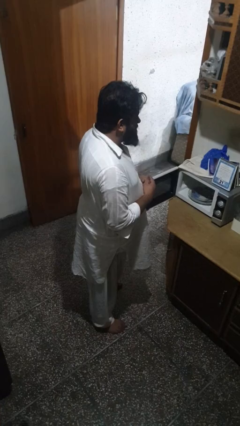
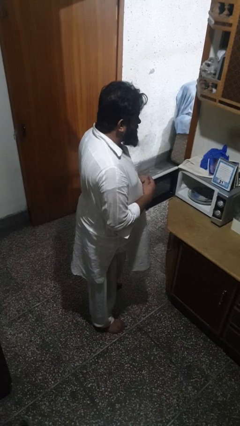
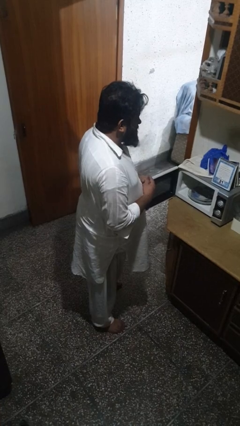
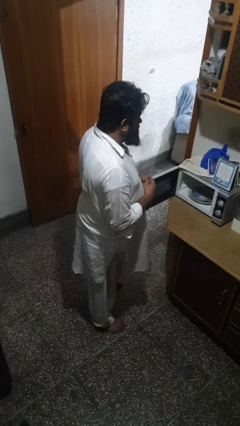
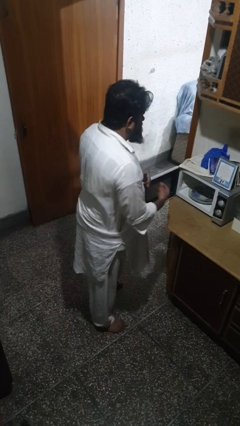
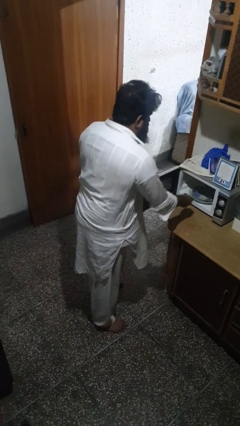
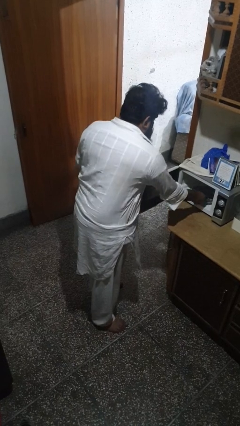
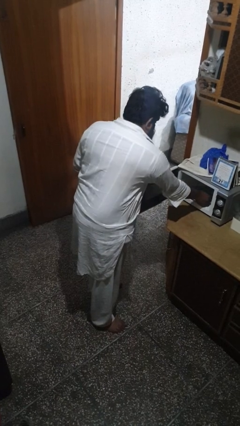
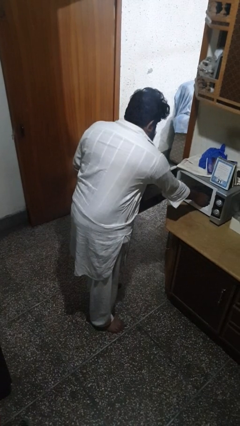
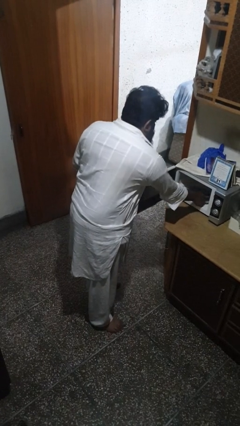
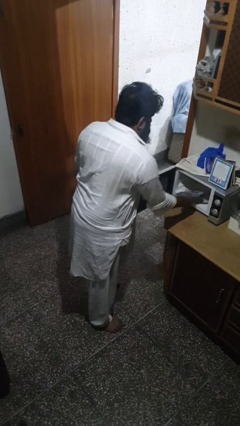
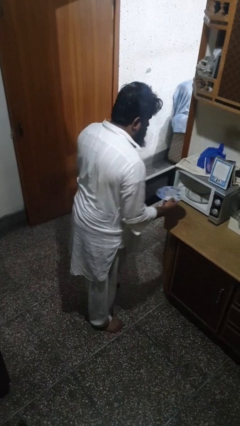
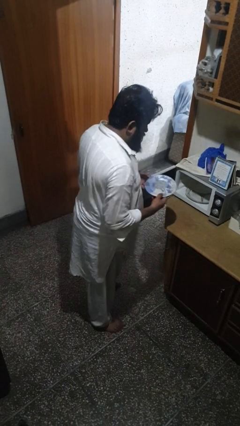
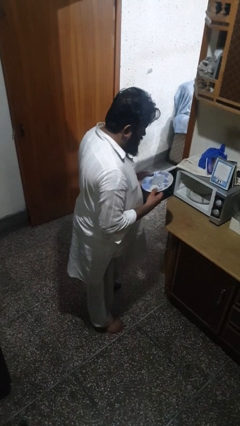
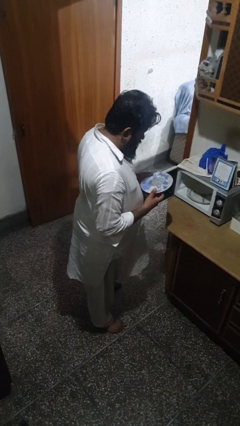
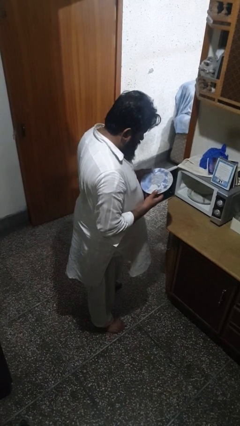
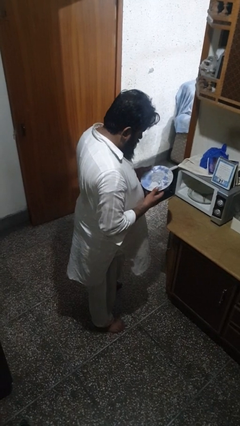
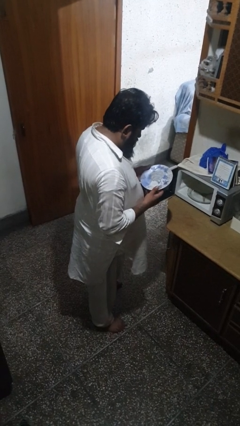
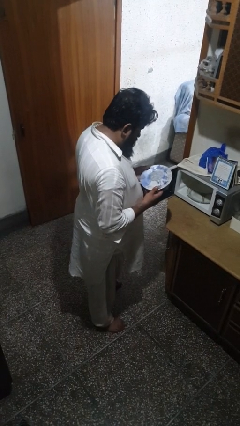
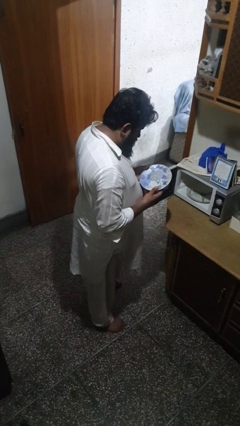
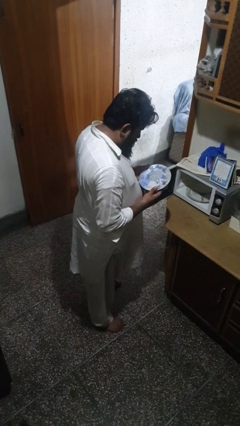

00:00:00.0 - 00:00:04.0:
person takes object from oven

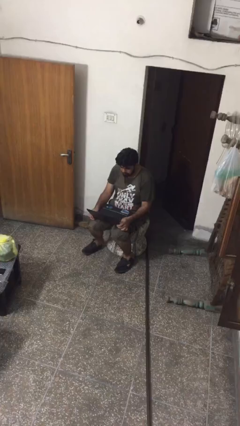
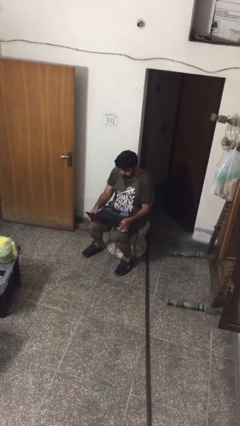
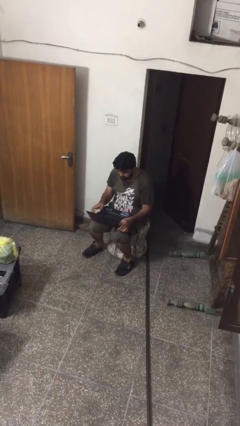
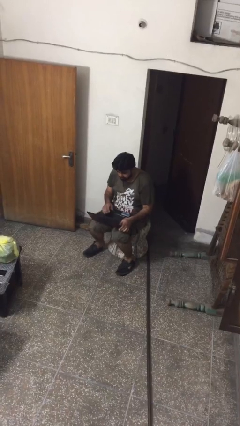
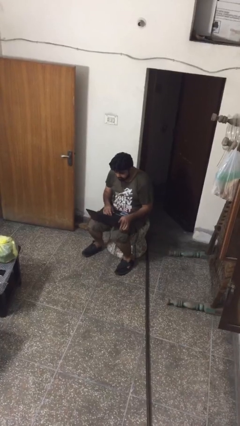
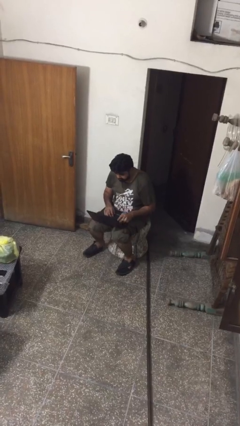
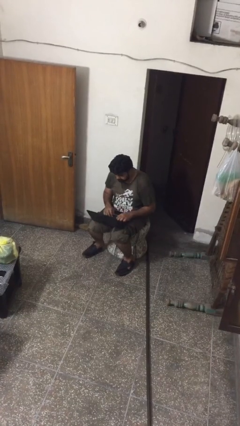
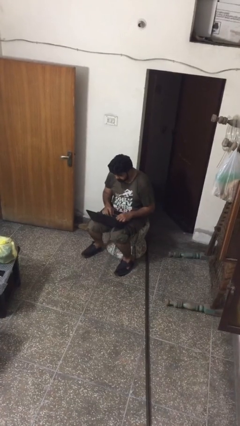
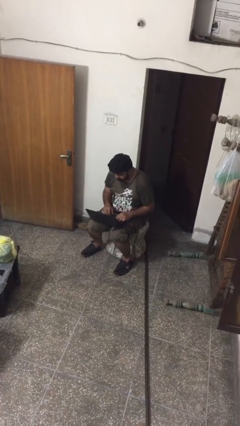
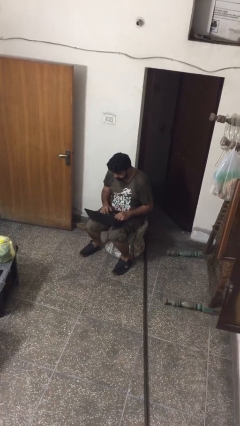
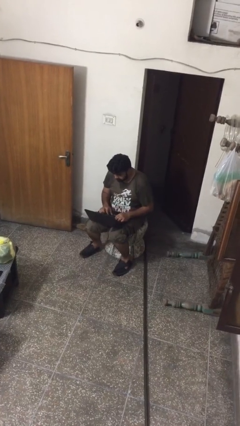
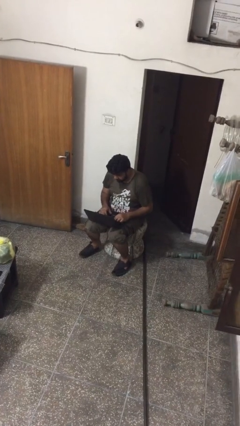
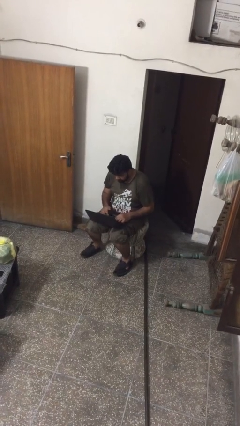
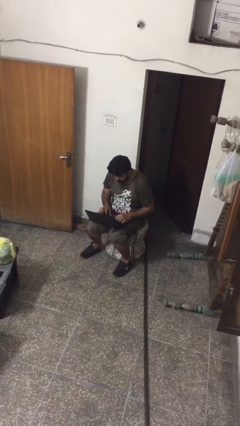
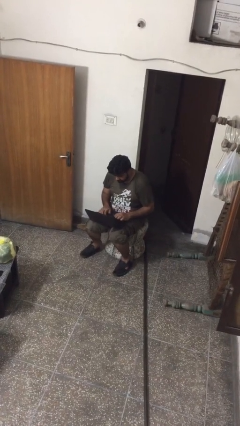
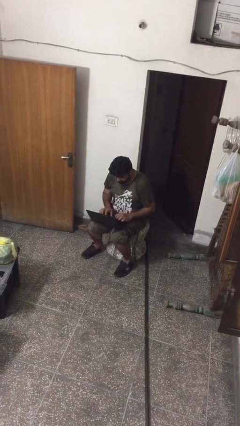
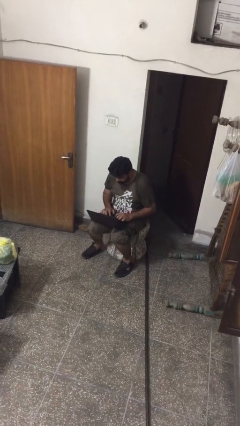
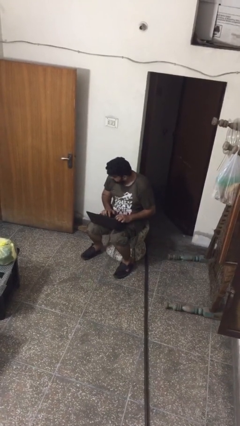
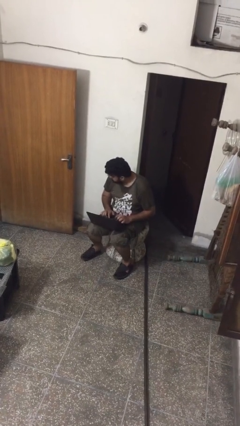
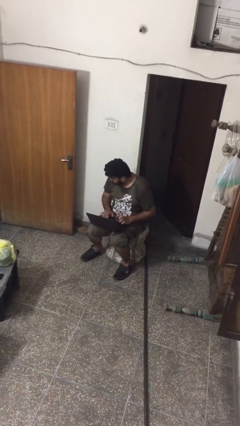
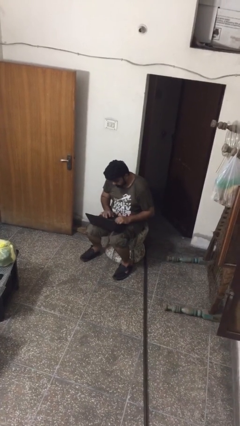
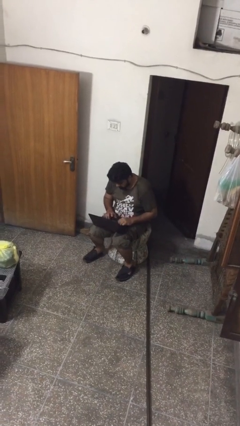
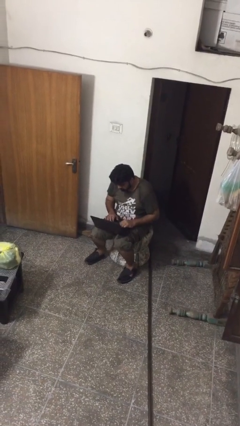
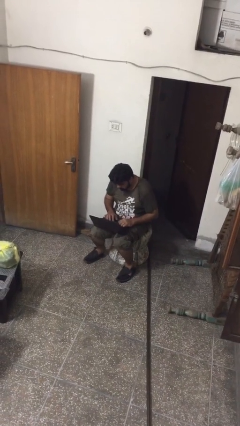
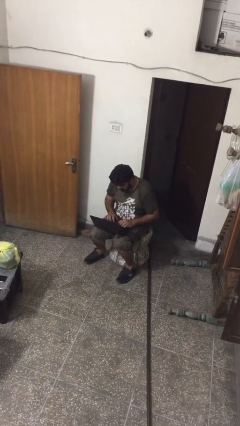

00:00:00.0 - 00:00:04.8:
person interacts with laptop

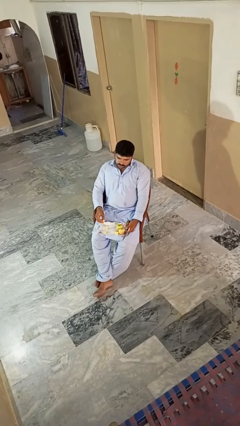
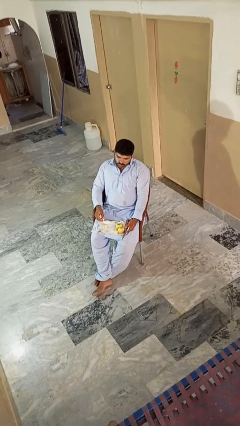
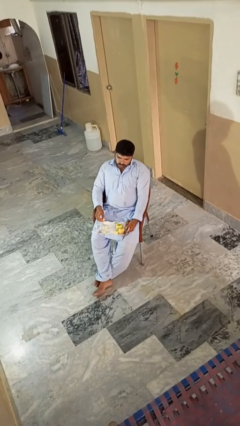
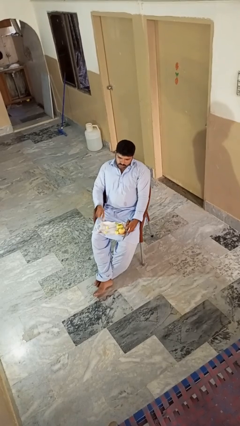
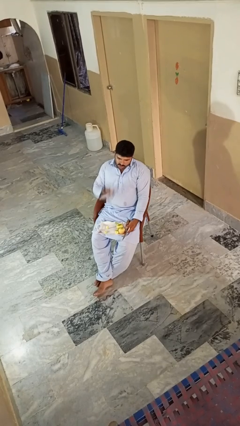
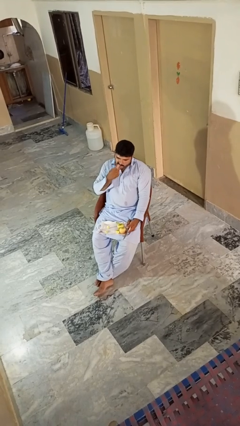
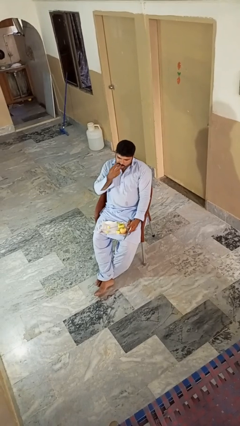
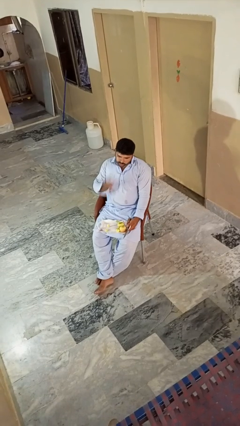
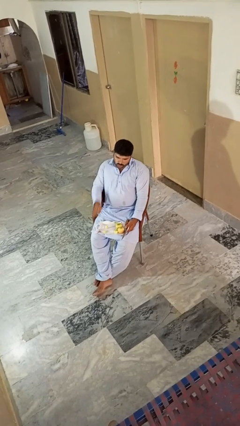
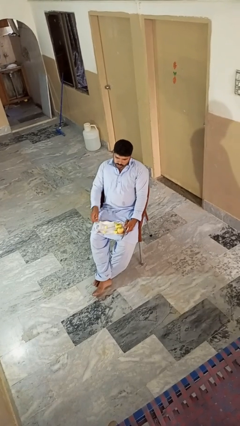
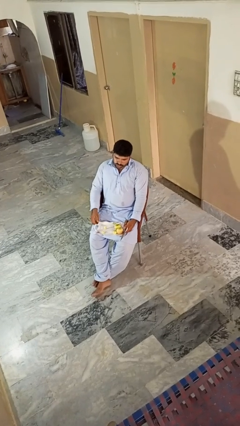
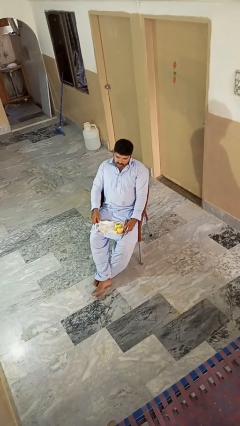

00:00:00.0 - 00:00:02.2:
person eats apple

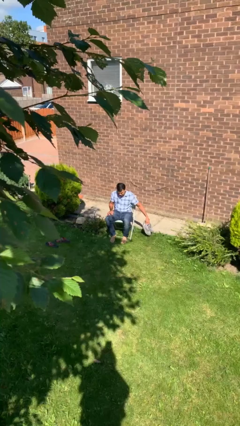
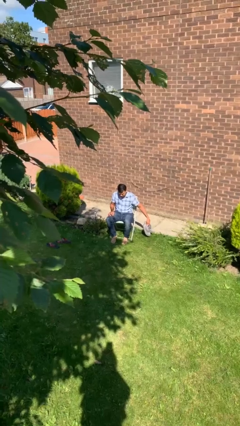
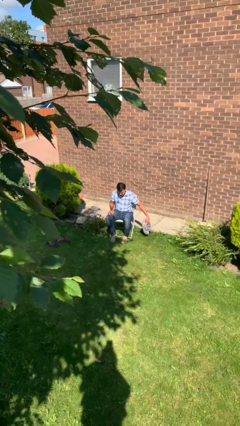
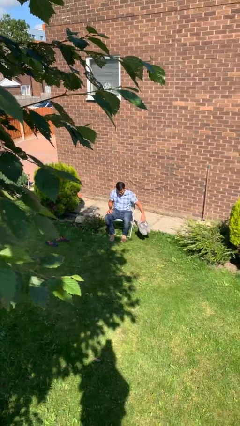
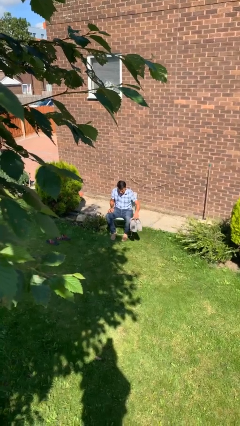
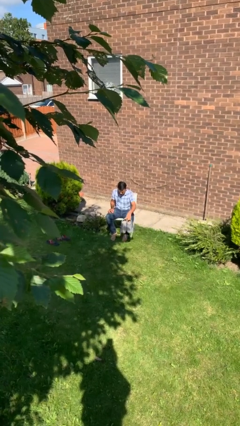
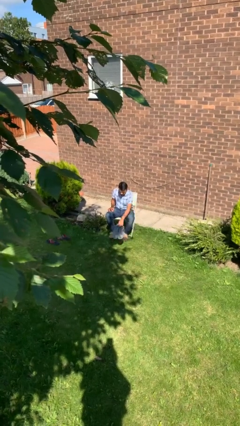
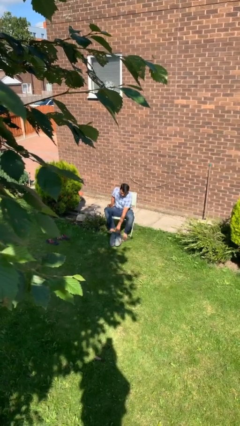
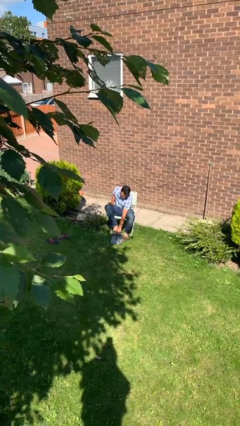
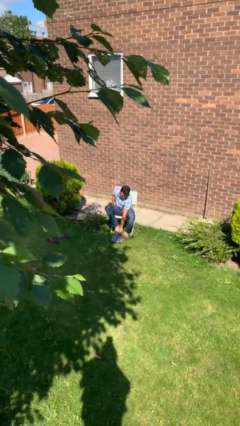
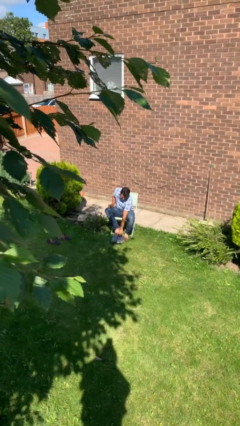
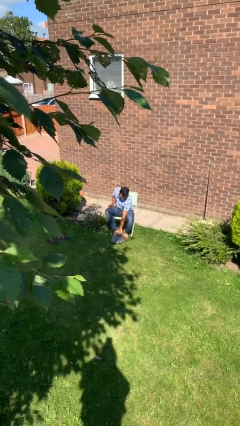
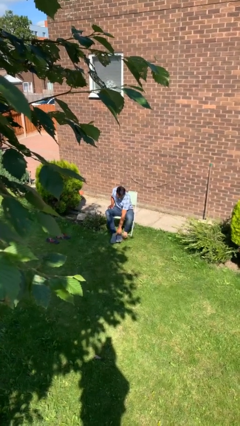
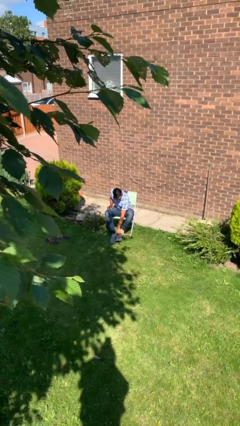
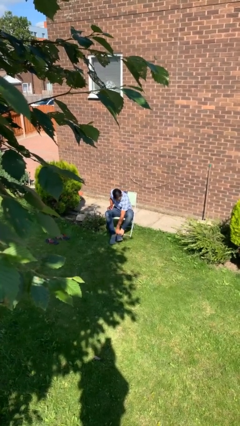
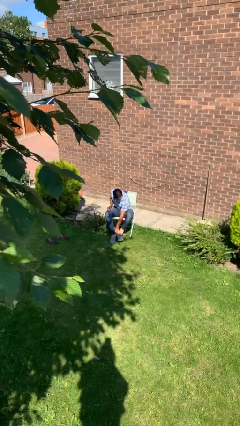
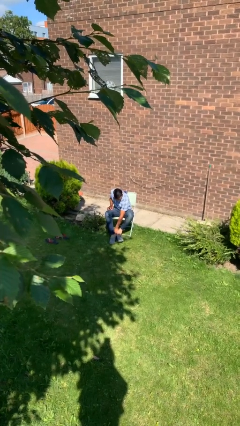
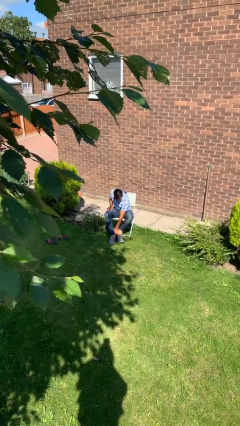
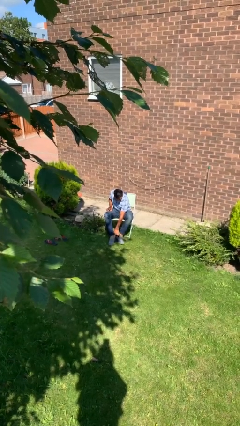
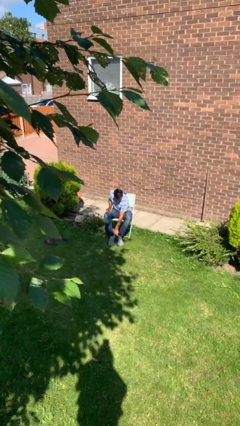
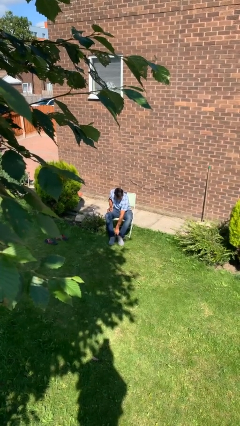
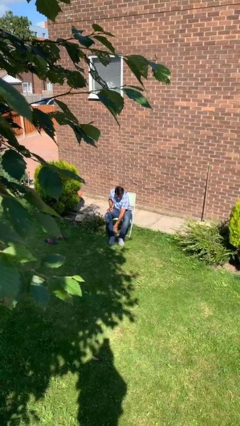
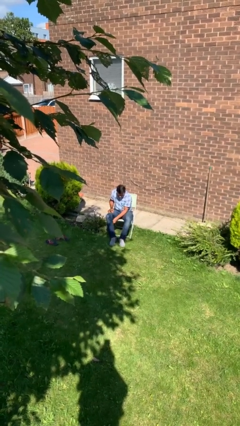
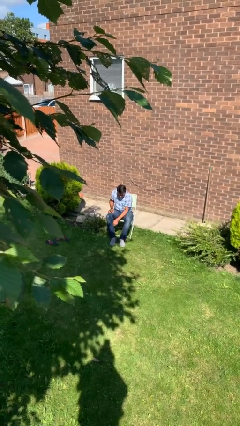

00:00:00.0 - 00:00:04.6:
person puts on shoes

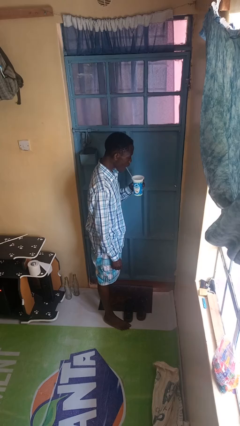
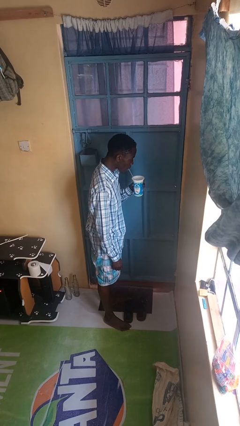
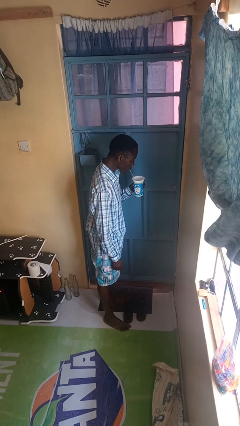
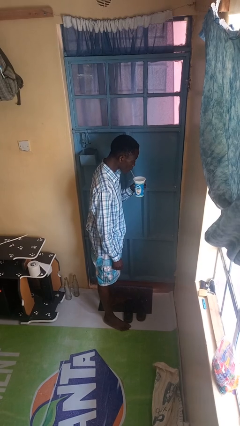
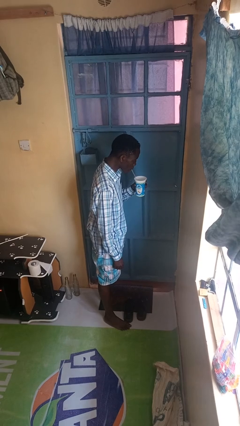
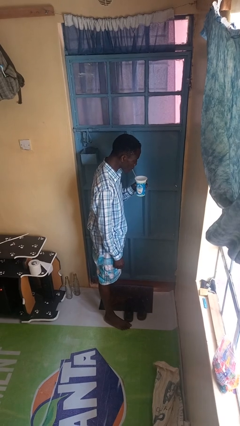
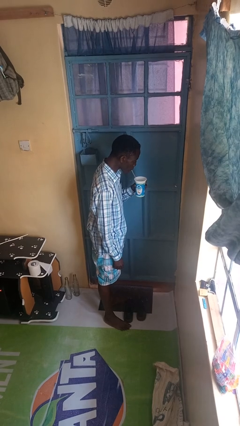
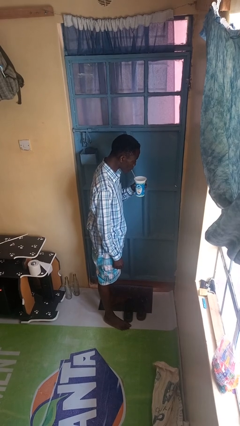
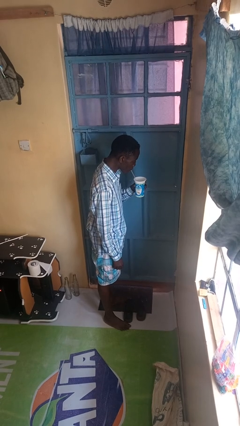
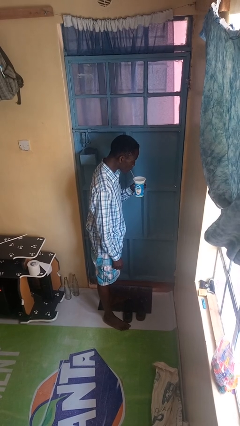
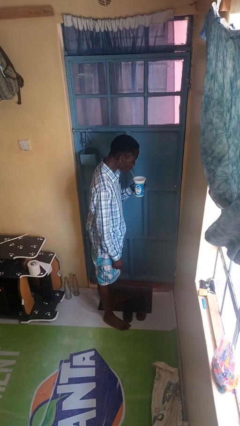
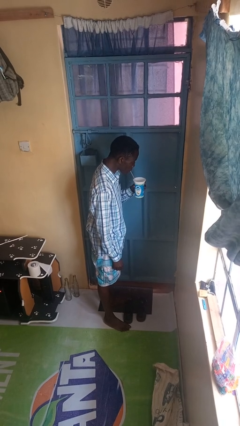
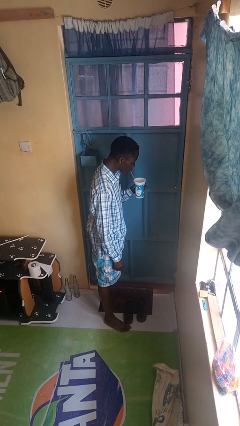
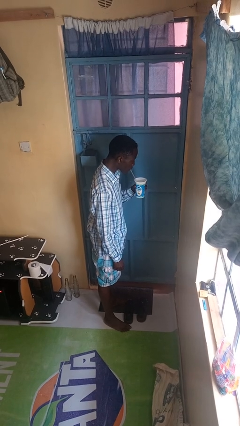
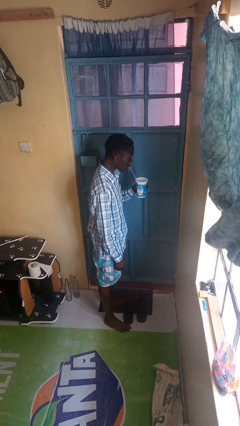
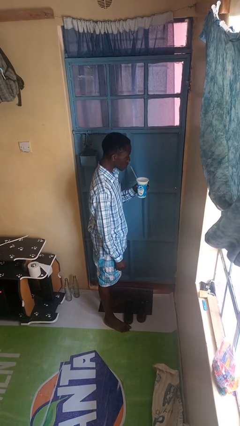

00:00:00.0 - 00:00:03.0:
person drinks from straw
